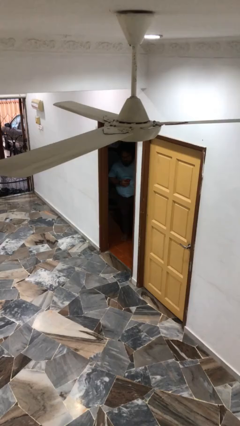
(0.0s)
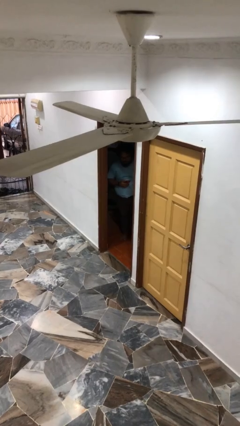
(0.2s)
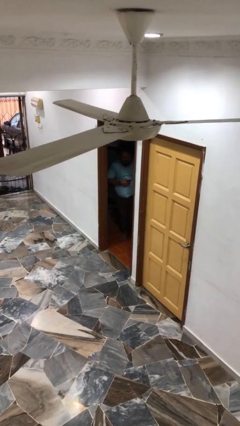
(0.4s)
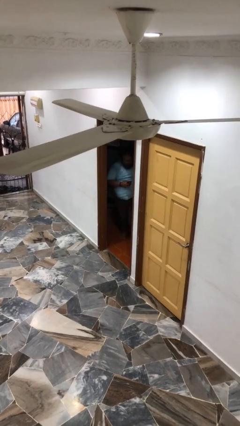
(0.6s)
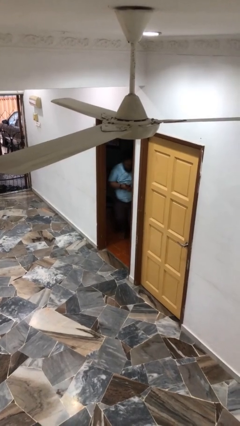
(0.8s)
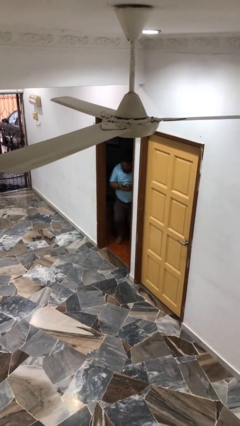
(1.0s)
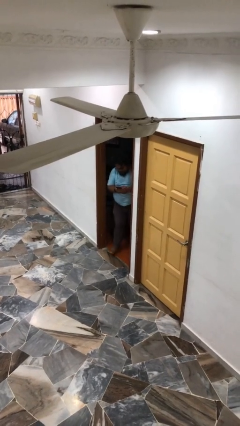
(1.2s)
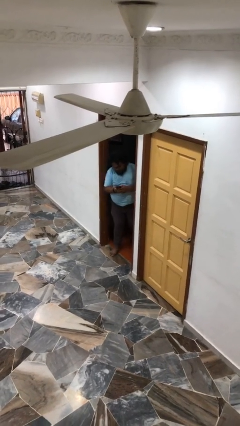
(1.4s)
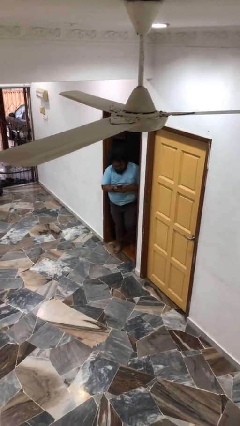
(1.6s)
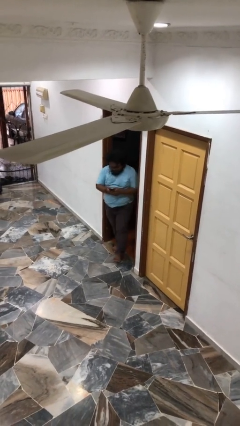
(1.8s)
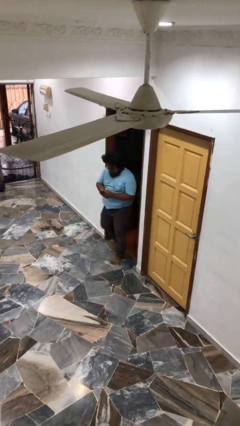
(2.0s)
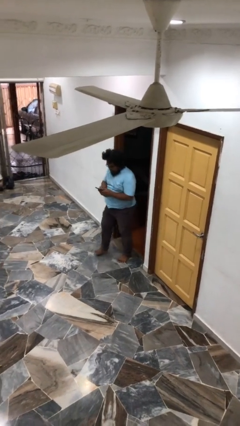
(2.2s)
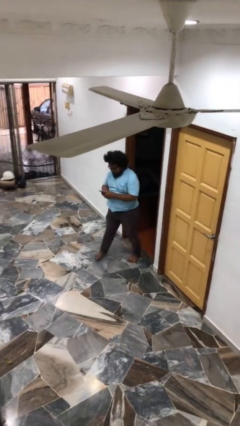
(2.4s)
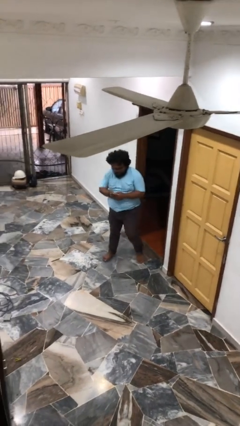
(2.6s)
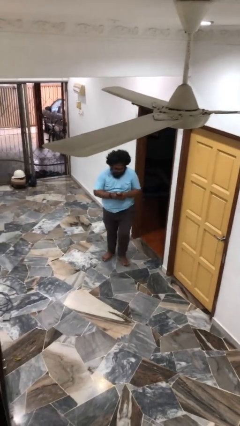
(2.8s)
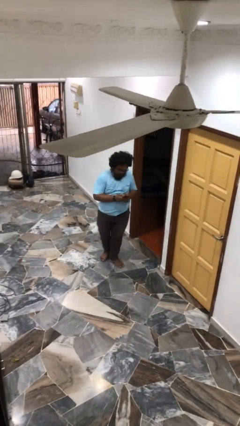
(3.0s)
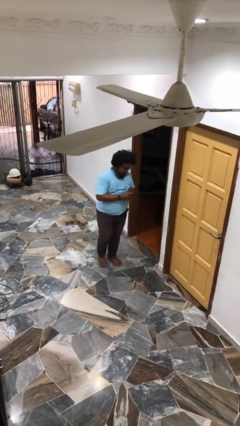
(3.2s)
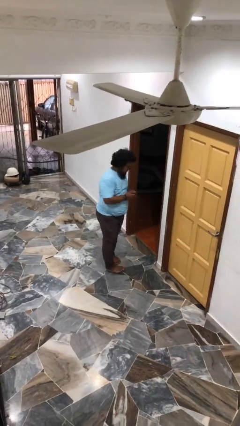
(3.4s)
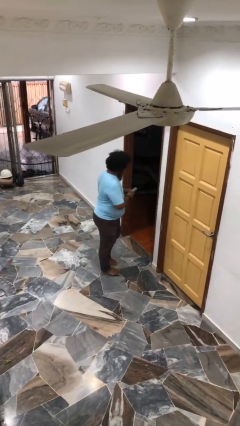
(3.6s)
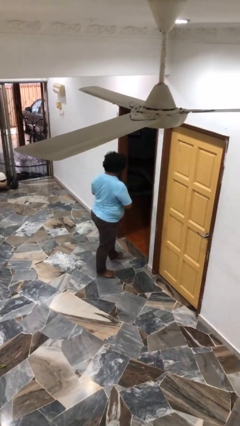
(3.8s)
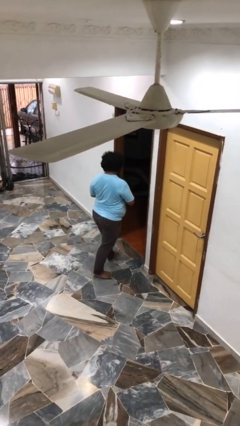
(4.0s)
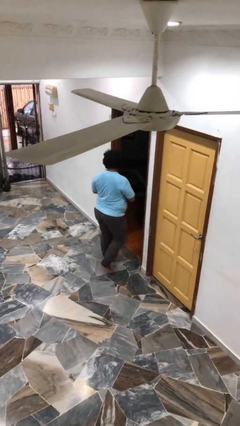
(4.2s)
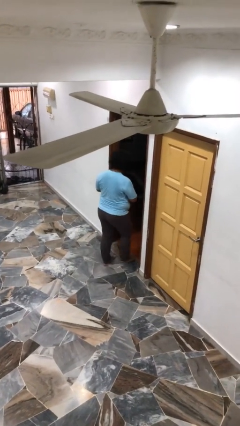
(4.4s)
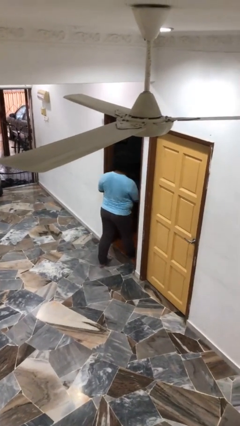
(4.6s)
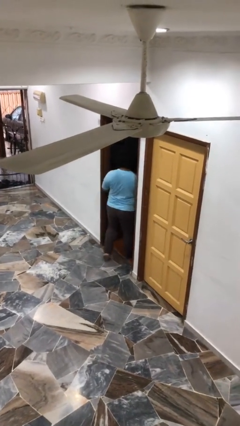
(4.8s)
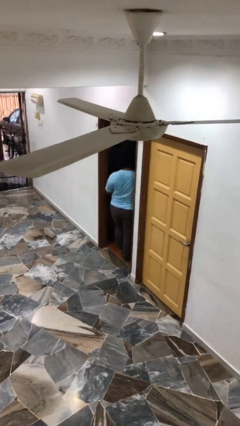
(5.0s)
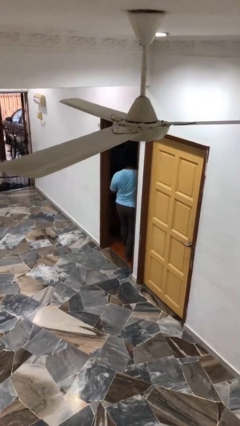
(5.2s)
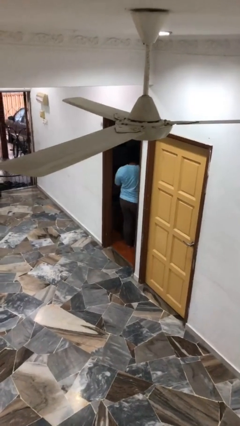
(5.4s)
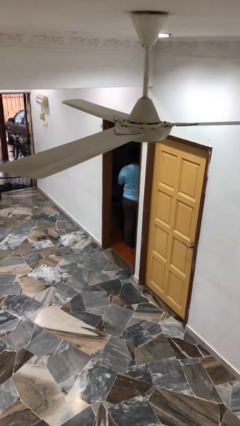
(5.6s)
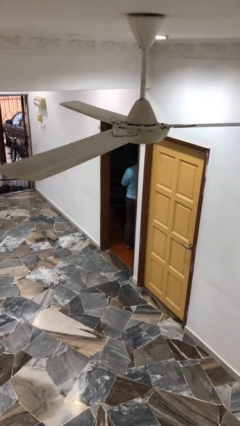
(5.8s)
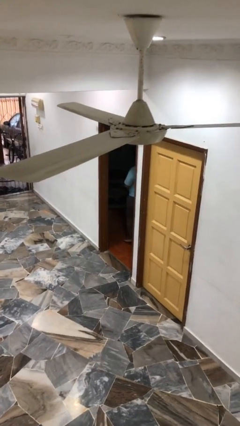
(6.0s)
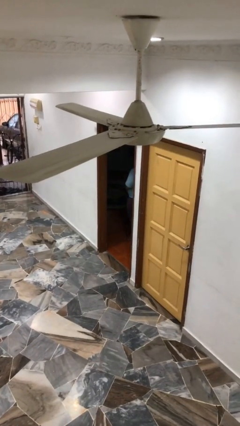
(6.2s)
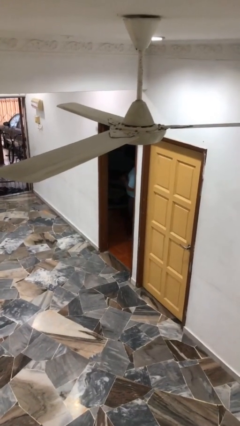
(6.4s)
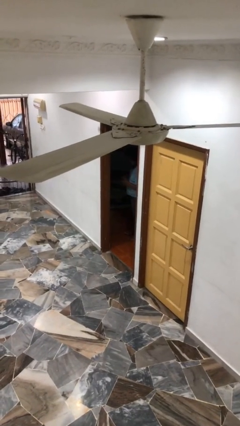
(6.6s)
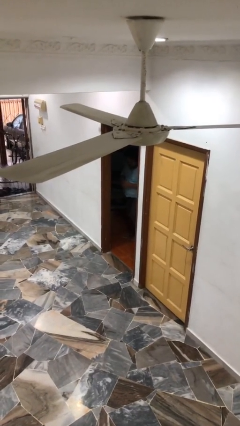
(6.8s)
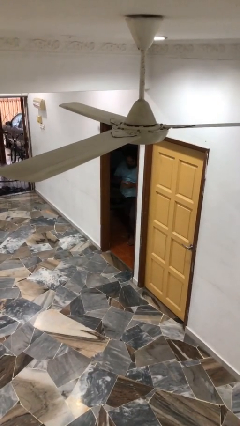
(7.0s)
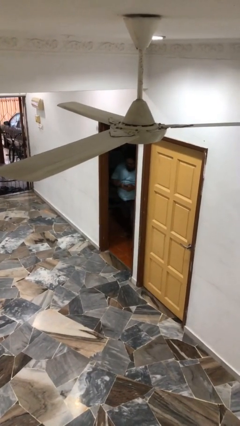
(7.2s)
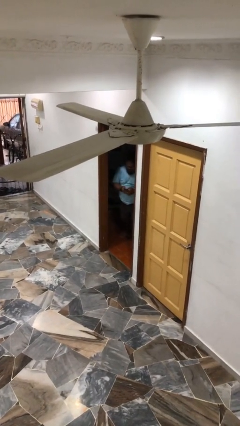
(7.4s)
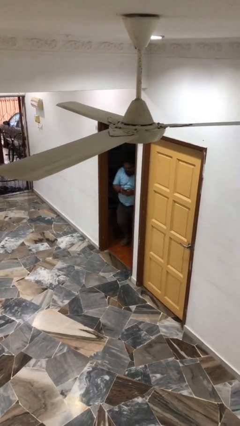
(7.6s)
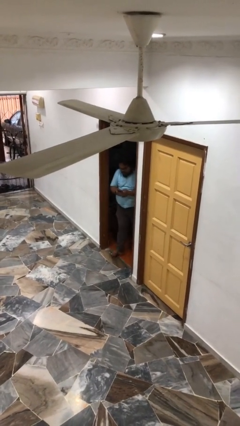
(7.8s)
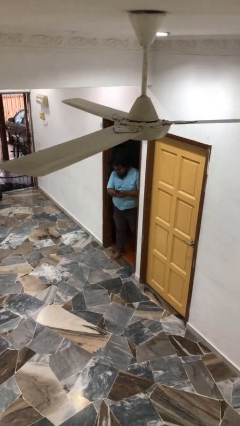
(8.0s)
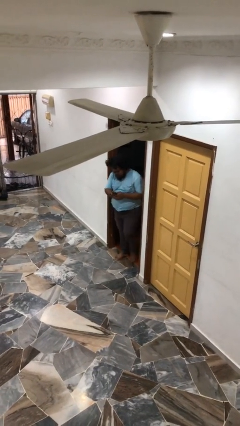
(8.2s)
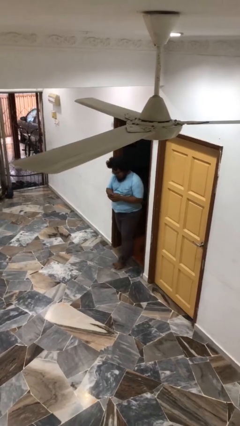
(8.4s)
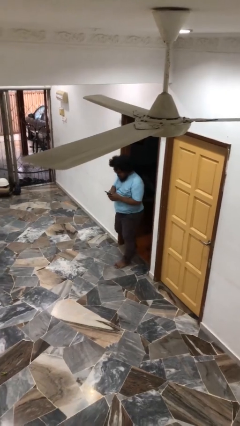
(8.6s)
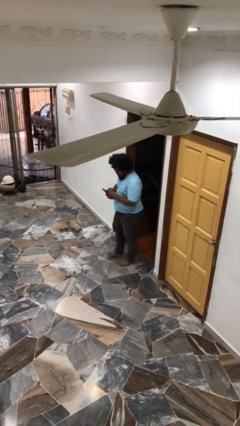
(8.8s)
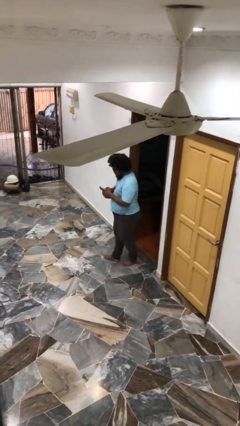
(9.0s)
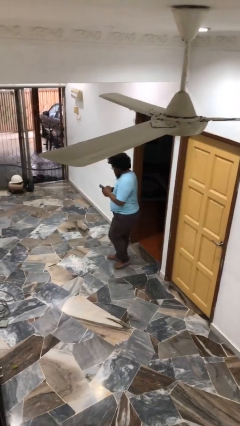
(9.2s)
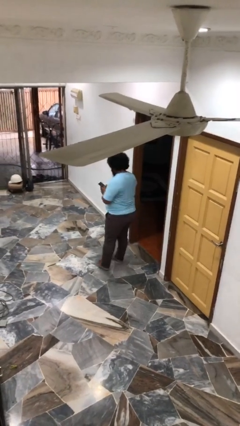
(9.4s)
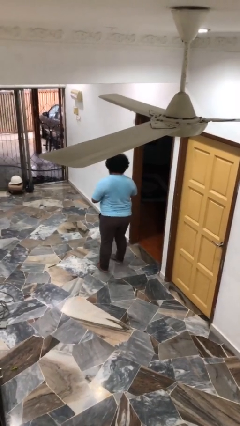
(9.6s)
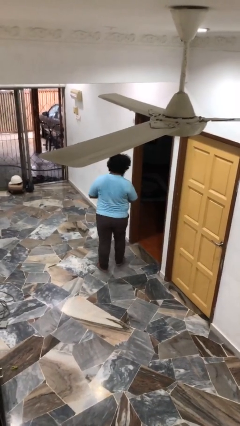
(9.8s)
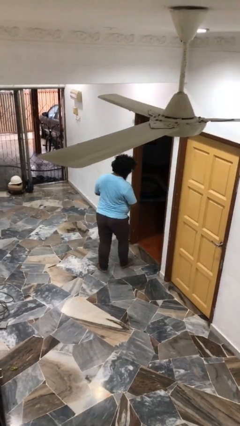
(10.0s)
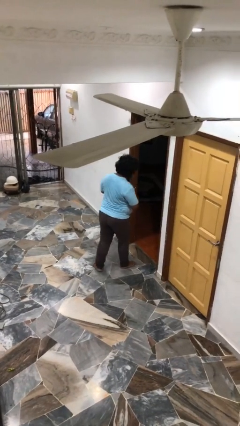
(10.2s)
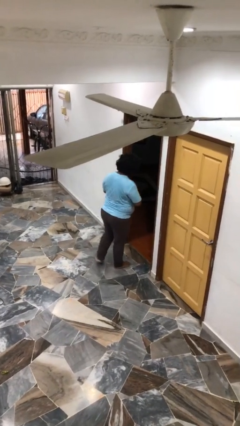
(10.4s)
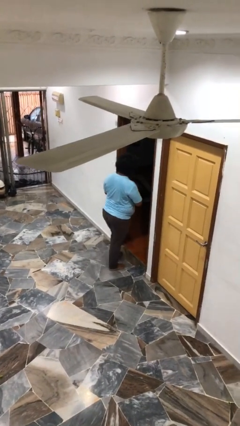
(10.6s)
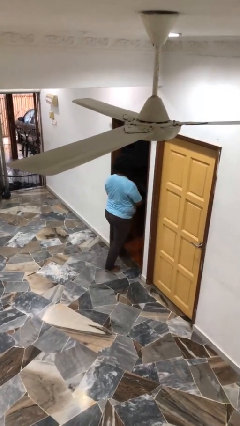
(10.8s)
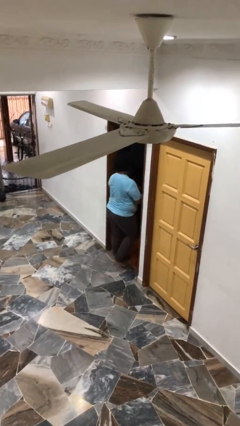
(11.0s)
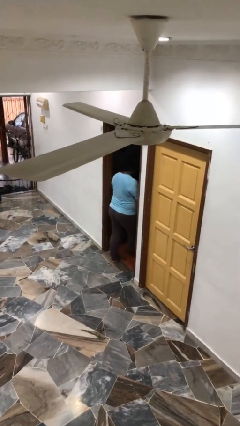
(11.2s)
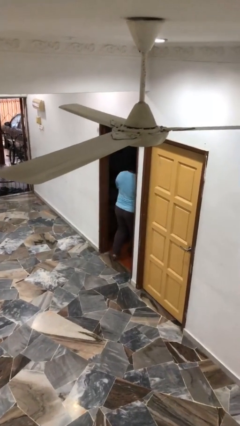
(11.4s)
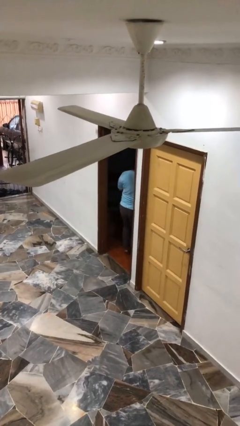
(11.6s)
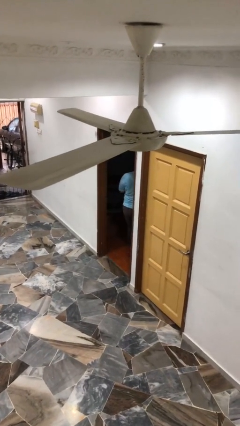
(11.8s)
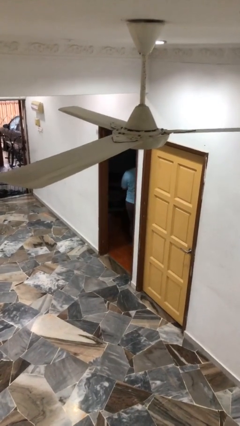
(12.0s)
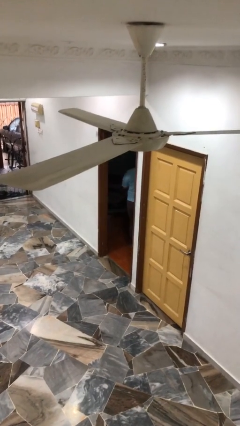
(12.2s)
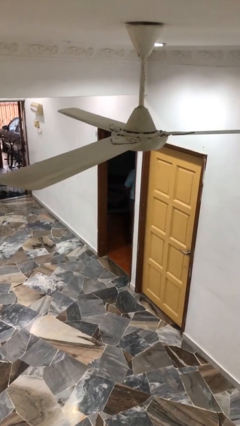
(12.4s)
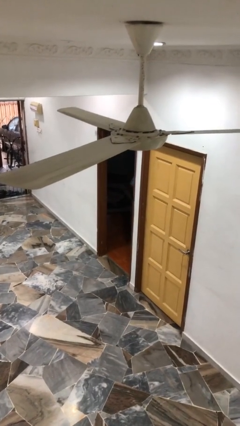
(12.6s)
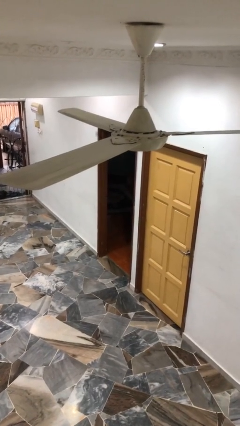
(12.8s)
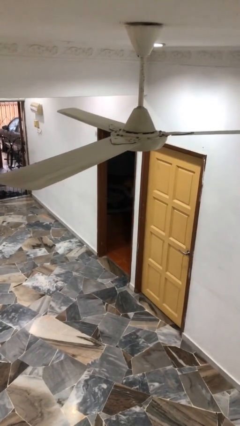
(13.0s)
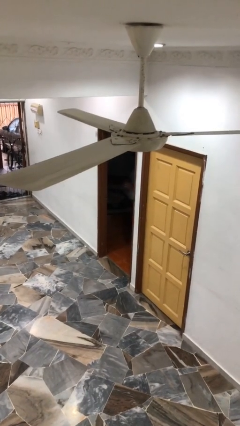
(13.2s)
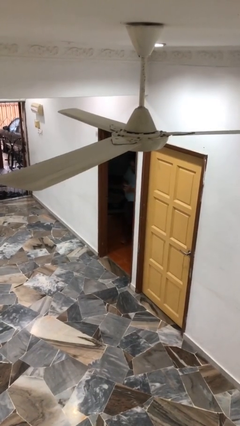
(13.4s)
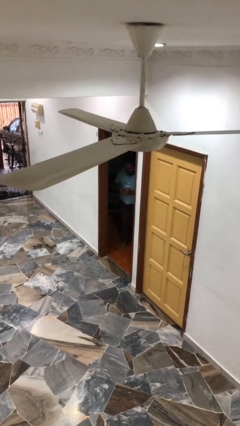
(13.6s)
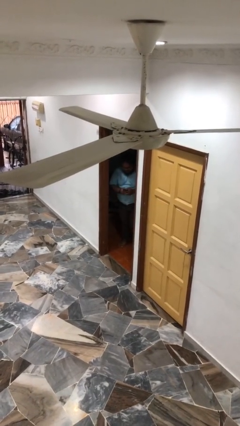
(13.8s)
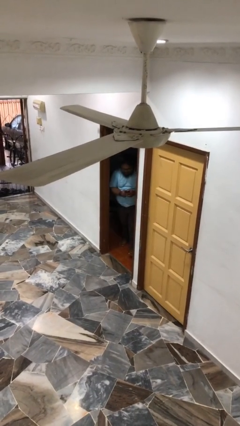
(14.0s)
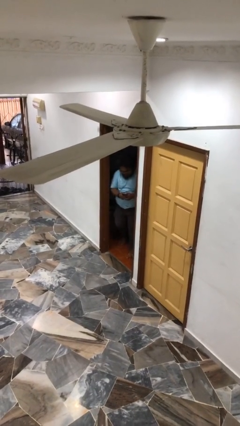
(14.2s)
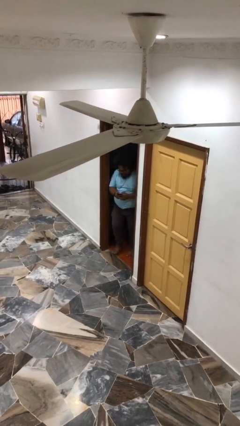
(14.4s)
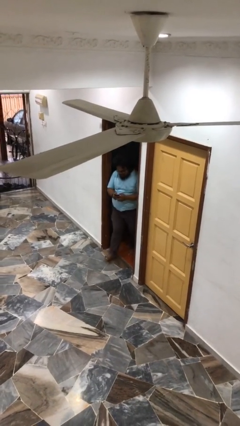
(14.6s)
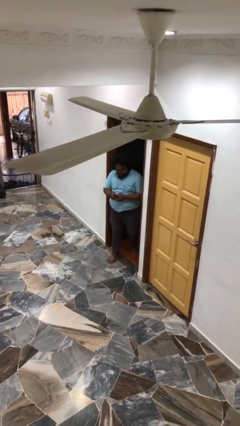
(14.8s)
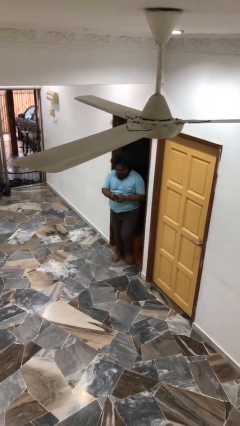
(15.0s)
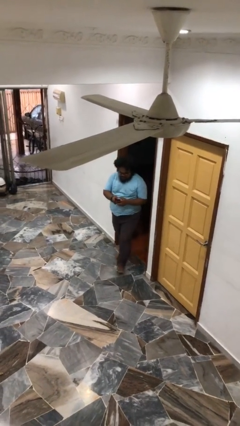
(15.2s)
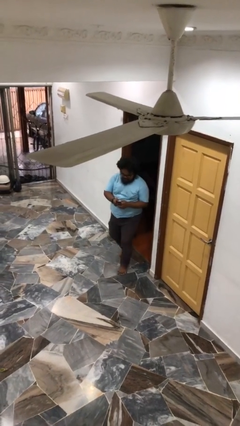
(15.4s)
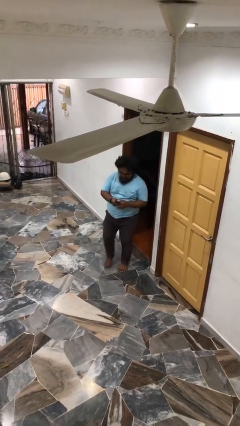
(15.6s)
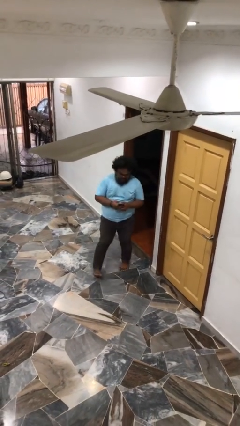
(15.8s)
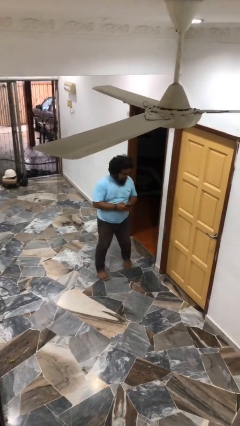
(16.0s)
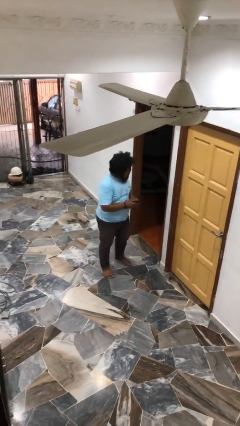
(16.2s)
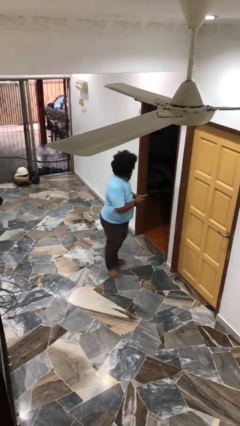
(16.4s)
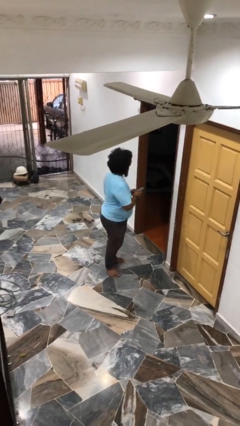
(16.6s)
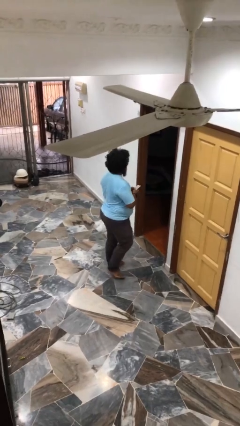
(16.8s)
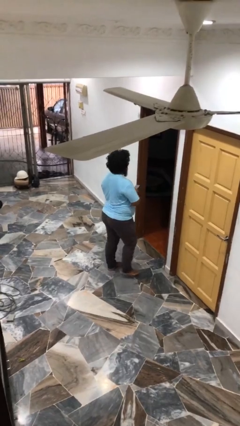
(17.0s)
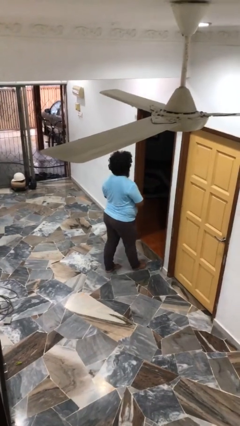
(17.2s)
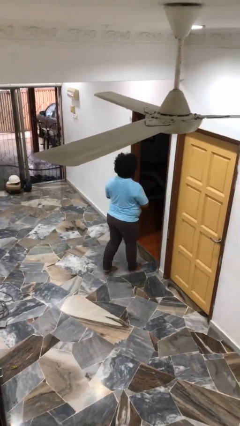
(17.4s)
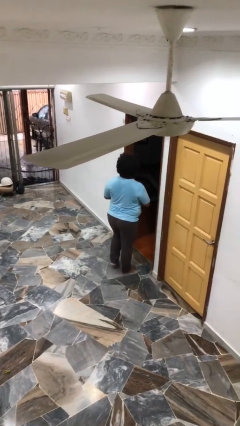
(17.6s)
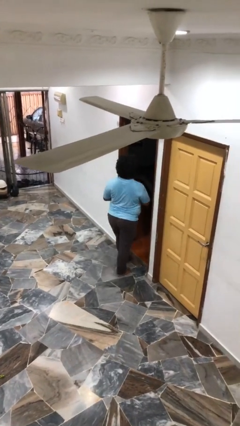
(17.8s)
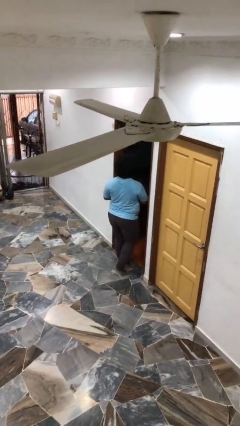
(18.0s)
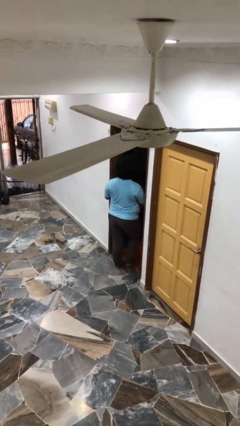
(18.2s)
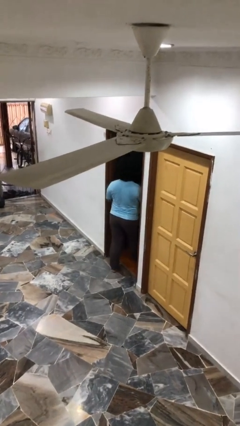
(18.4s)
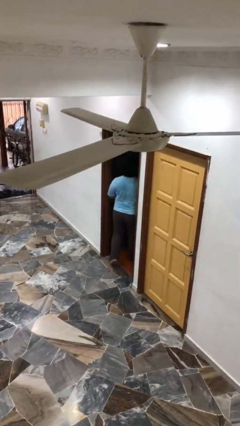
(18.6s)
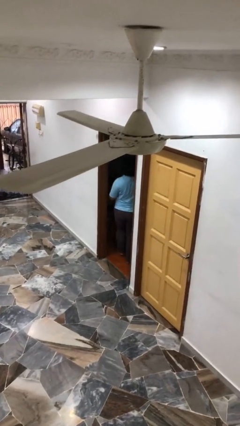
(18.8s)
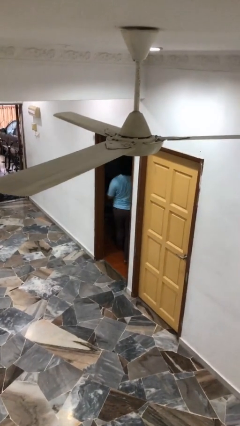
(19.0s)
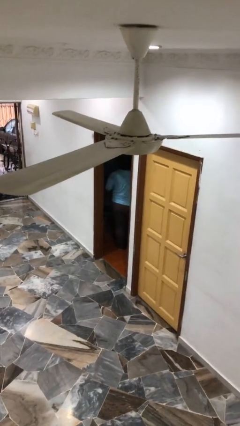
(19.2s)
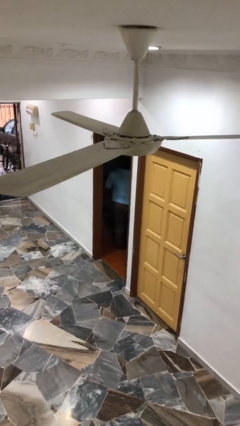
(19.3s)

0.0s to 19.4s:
person texts on phone
